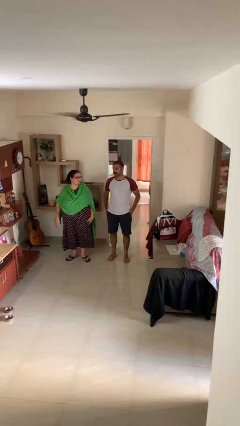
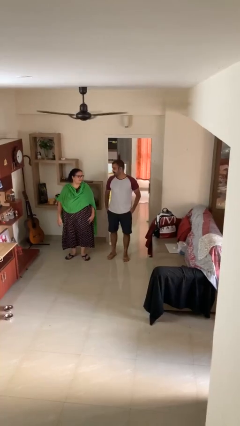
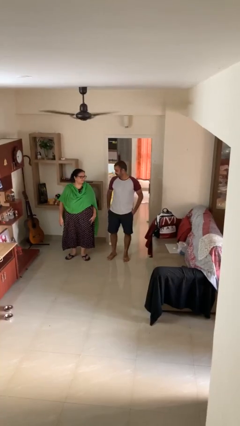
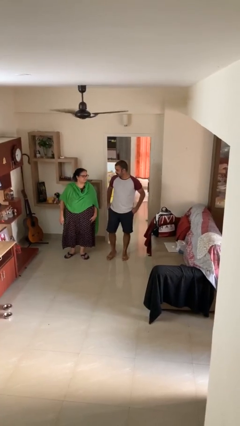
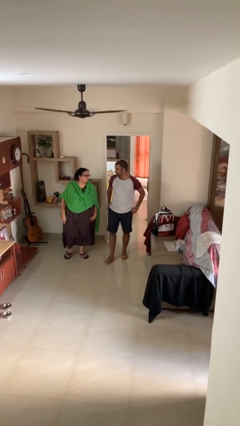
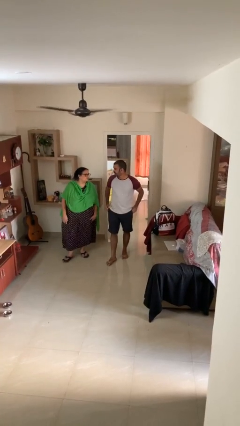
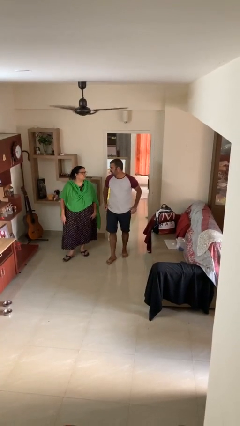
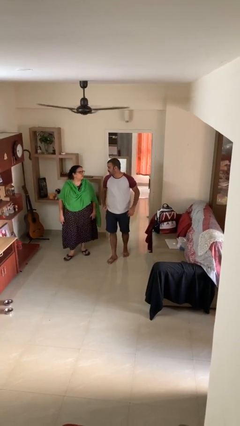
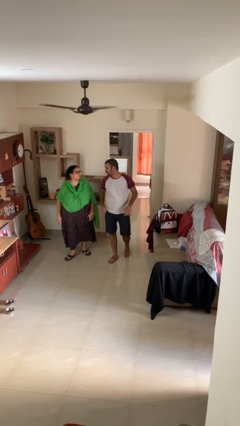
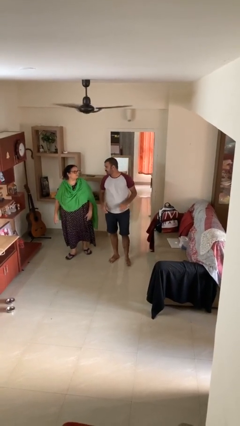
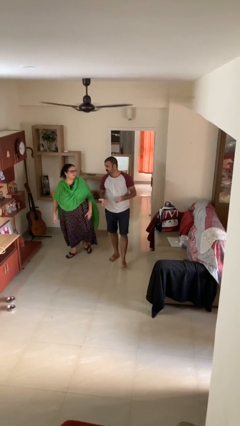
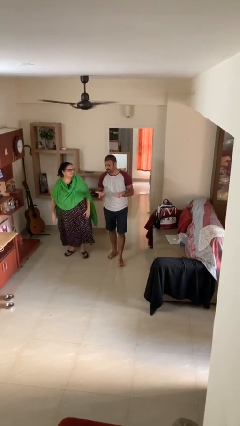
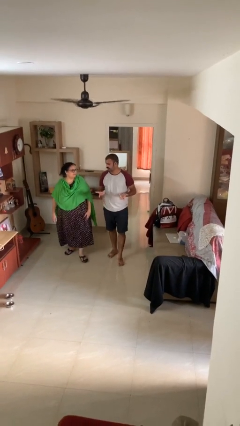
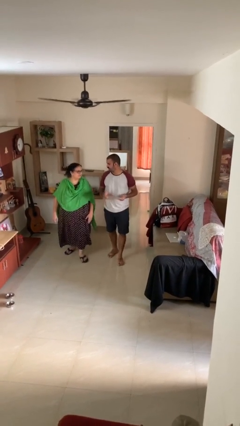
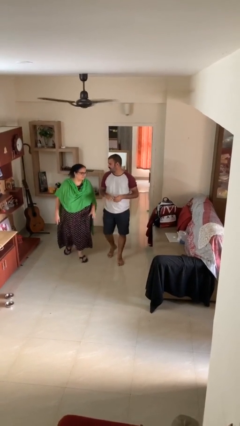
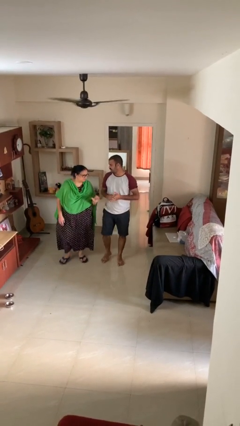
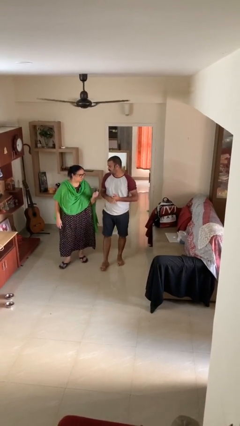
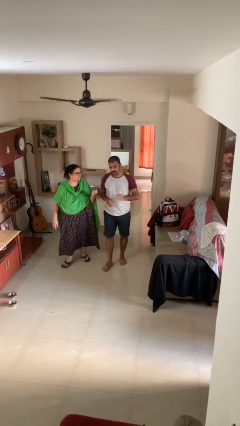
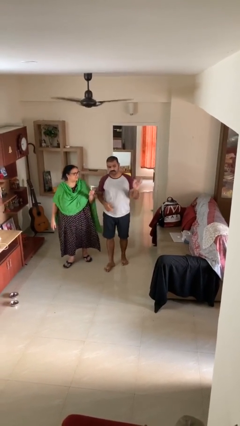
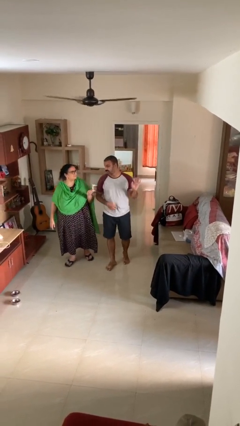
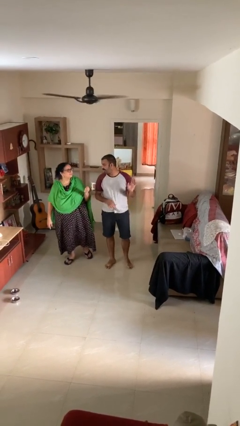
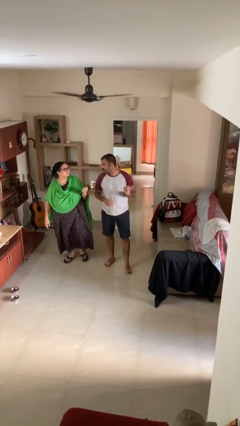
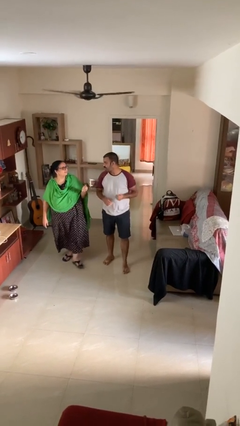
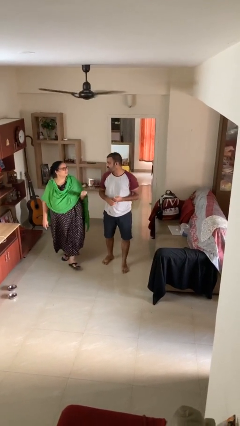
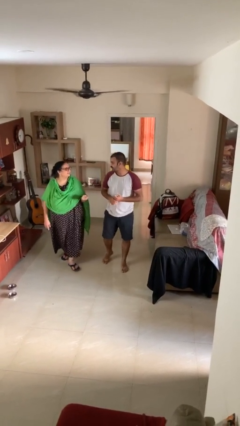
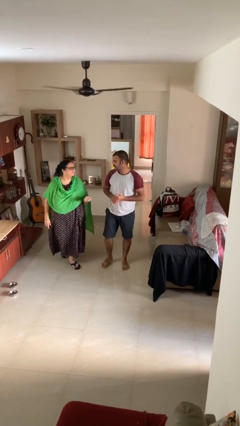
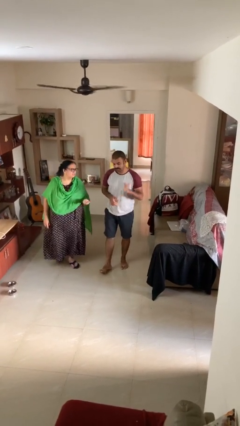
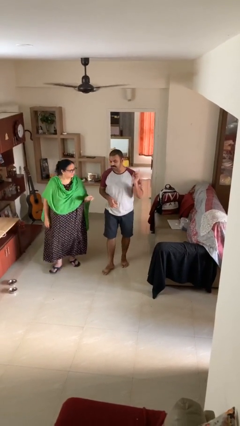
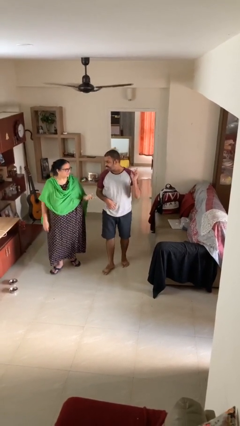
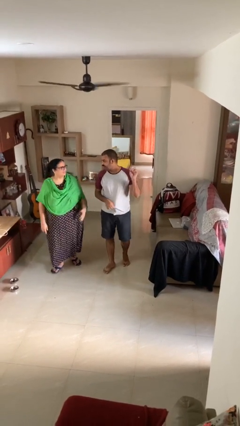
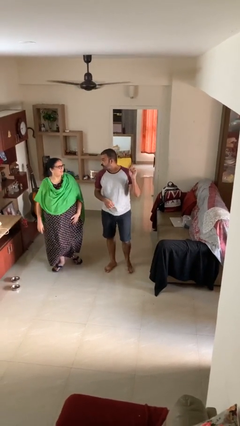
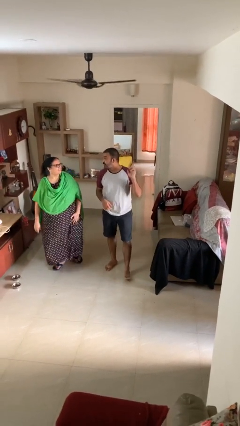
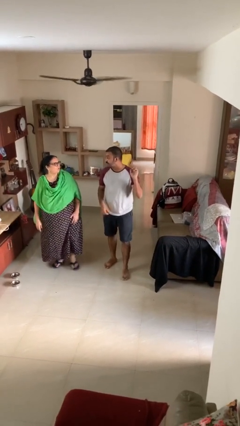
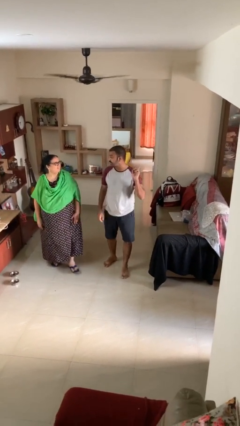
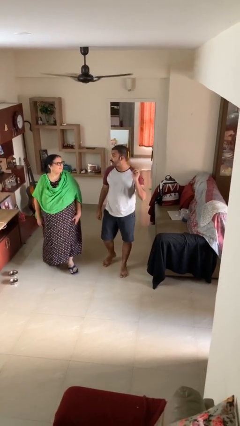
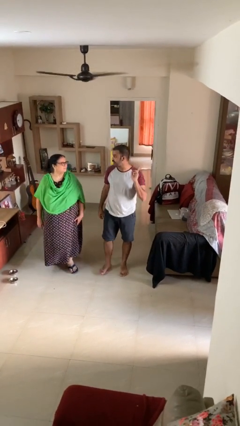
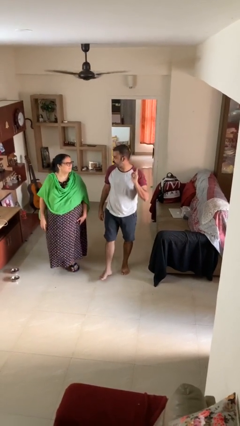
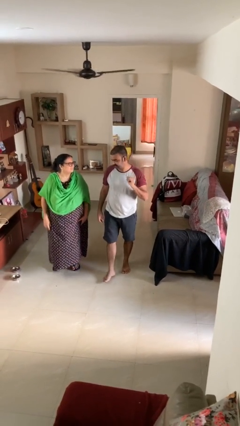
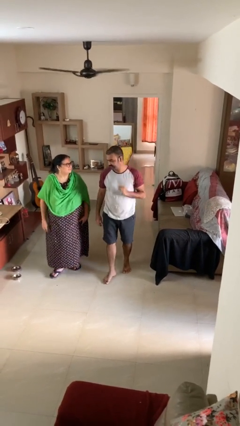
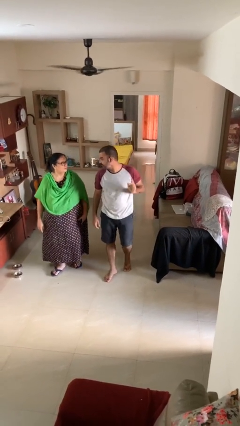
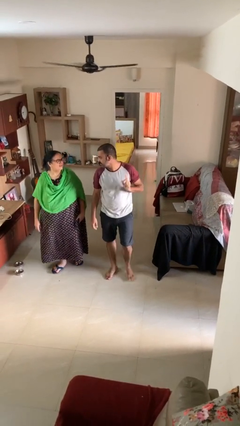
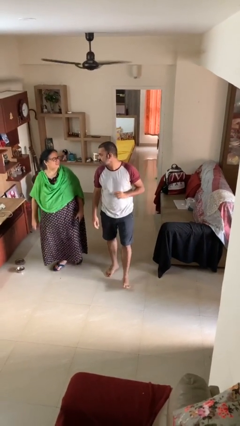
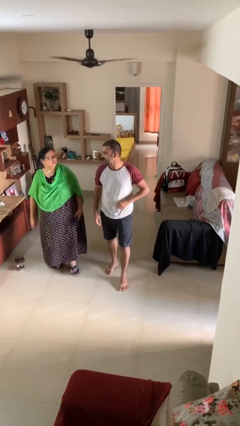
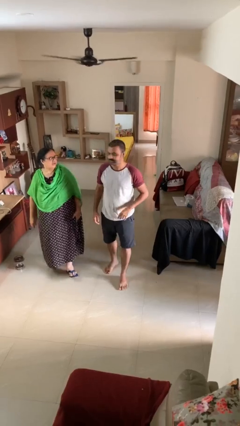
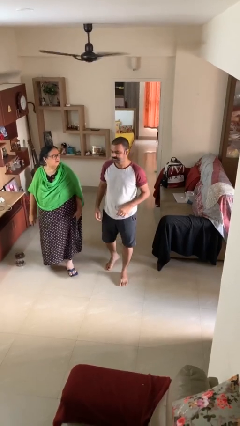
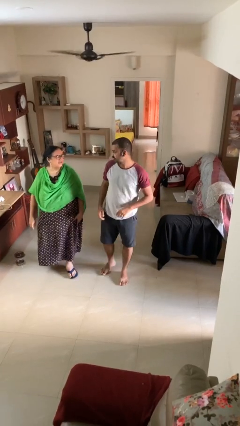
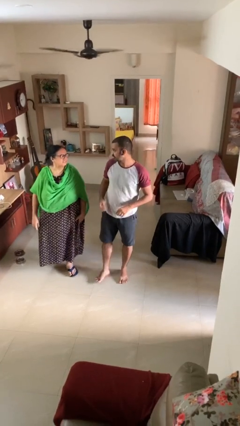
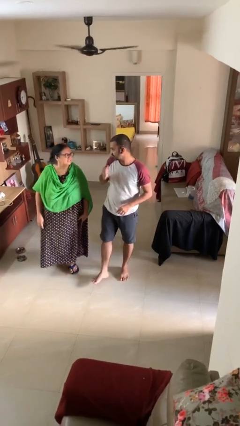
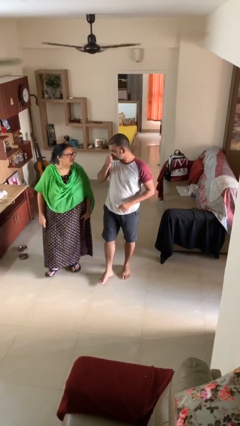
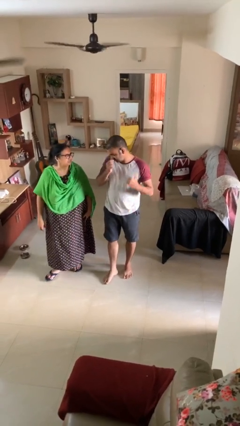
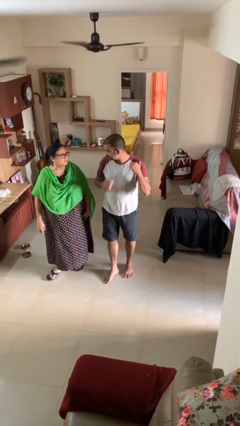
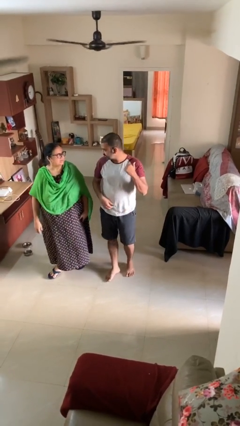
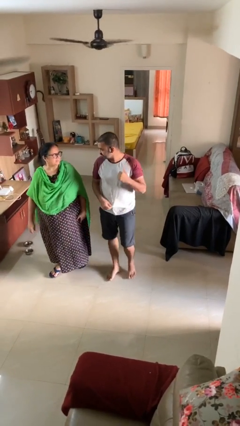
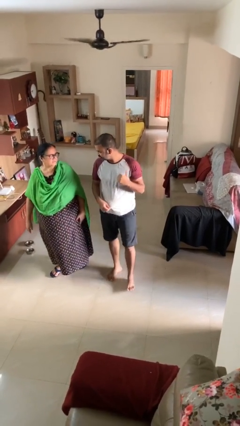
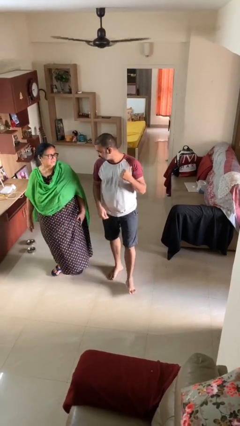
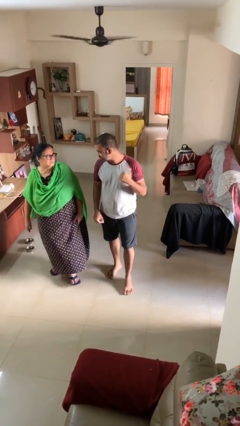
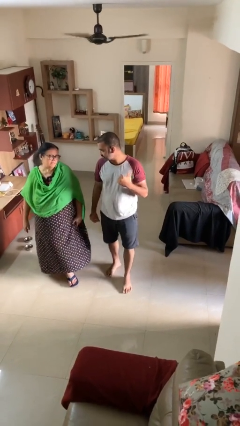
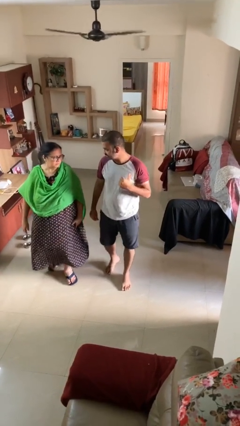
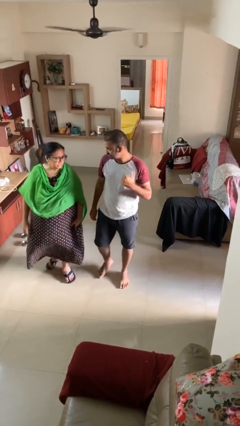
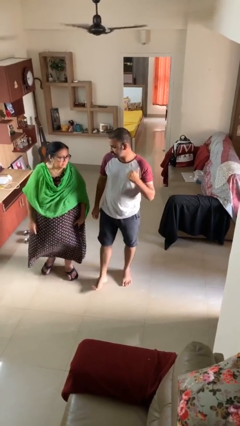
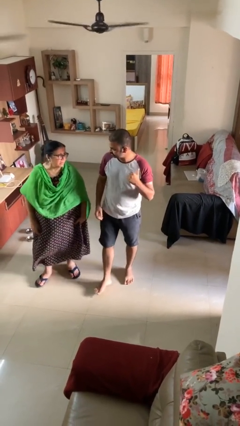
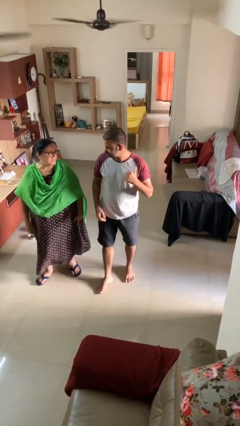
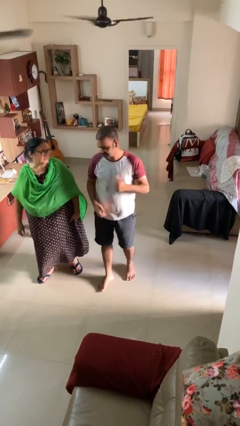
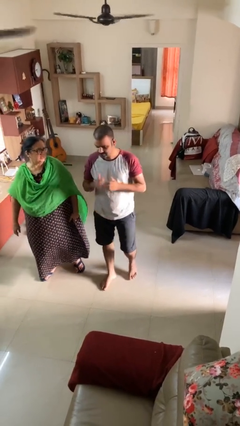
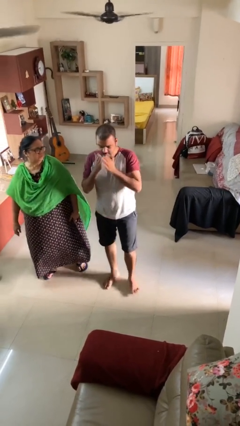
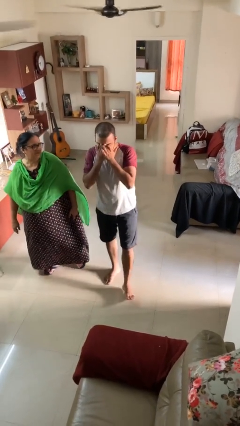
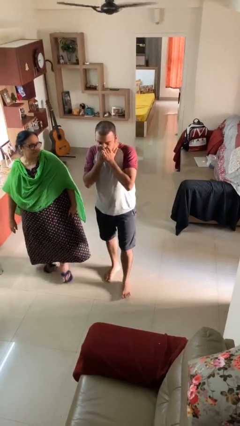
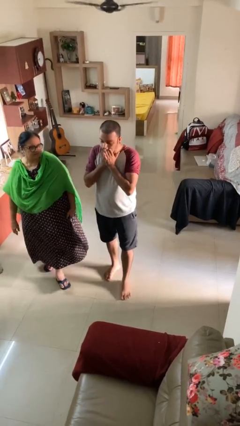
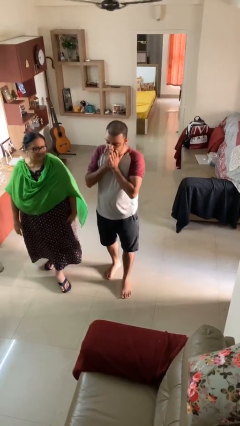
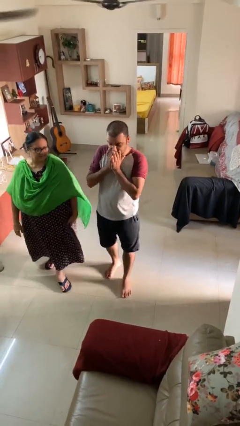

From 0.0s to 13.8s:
person talks to person

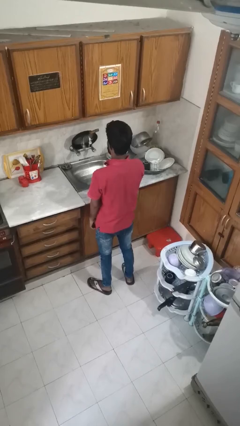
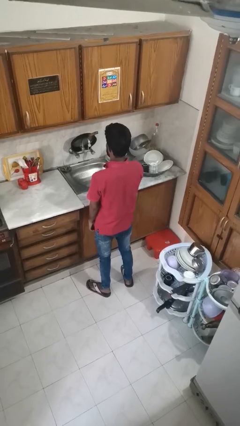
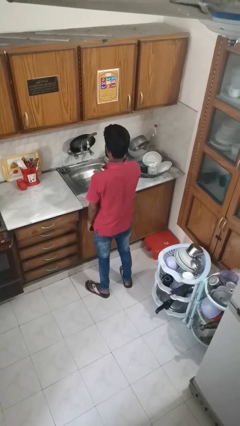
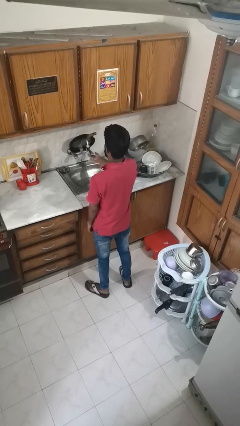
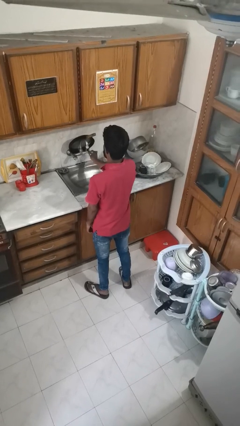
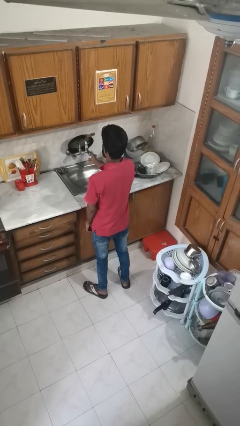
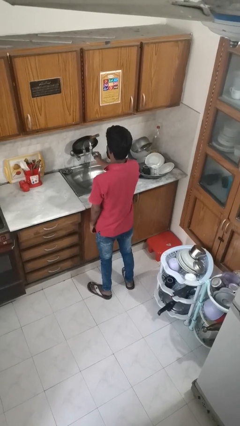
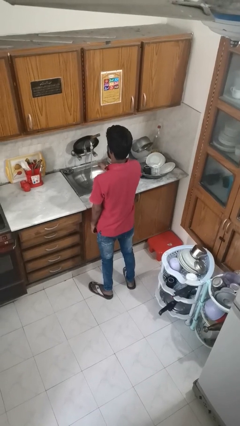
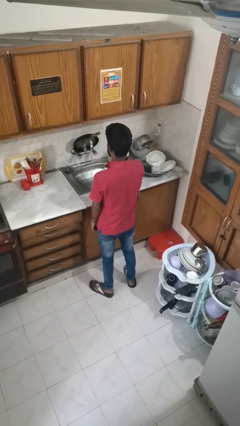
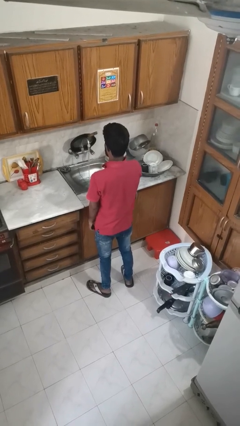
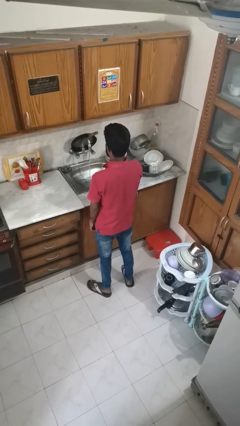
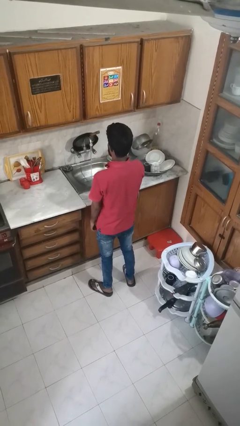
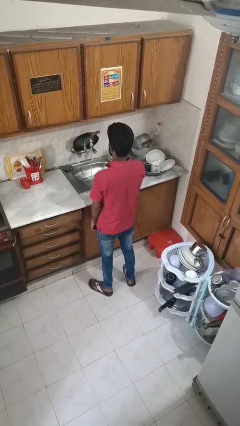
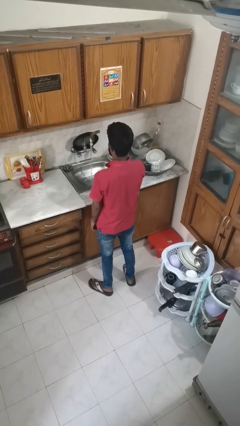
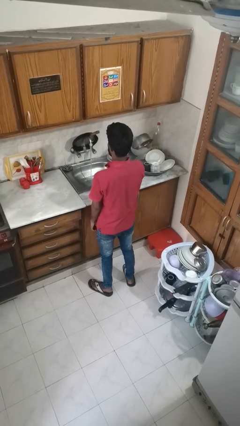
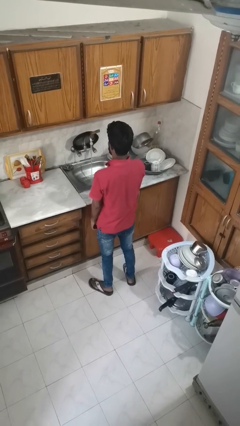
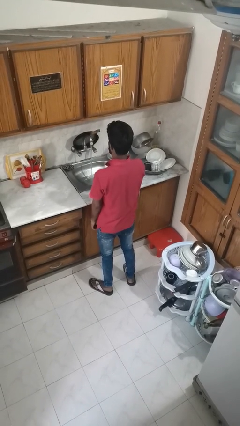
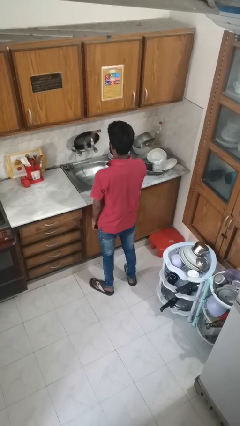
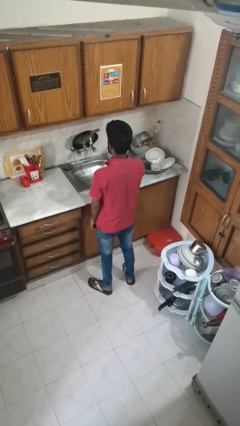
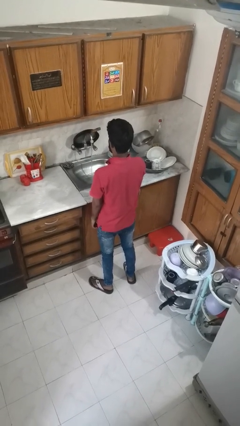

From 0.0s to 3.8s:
person turns on faucet

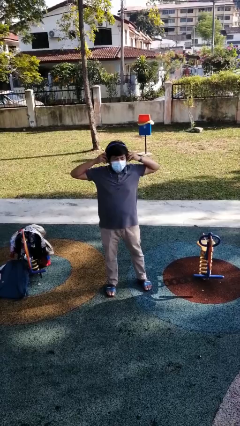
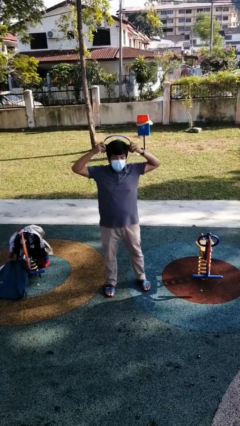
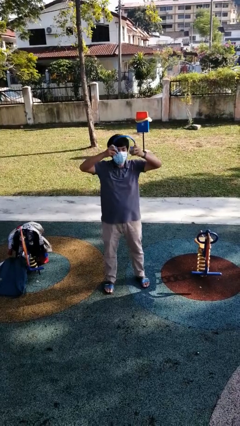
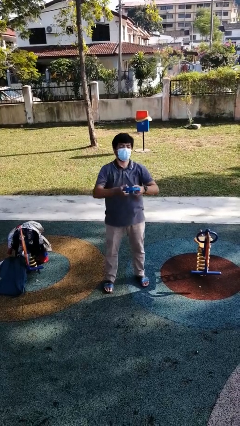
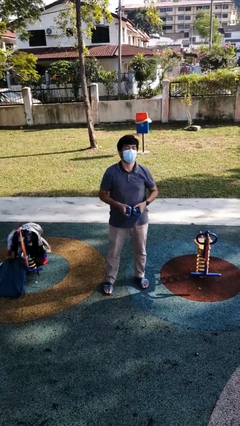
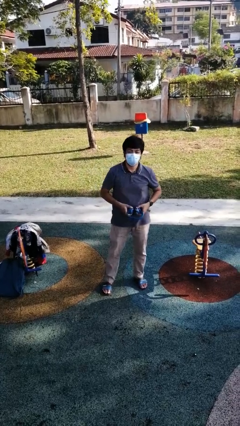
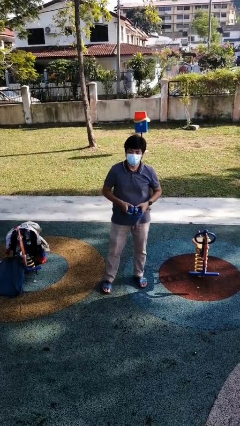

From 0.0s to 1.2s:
person takes off headphones
